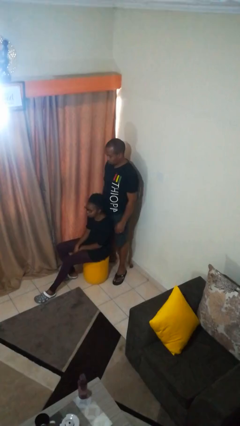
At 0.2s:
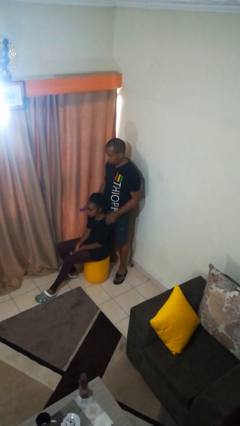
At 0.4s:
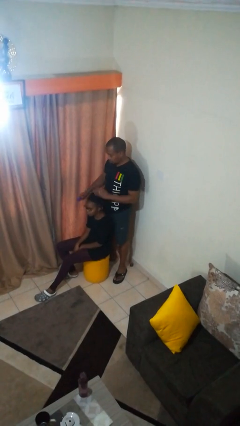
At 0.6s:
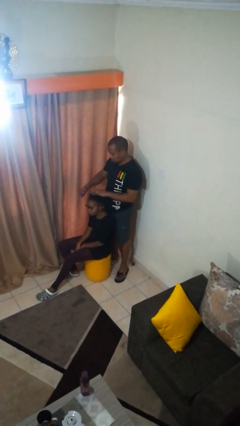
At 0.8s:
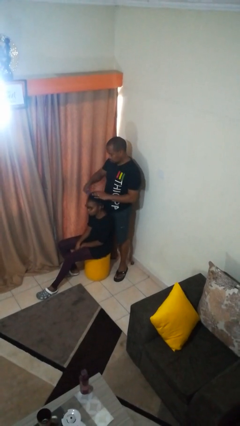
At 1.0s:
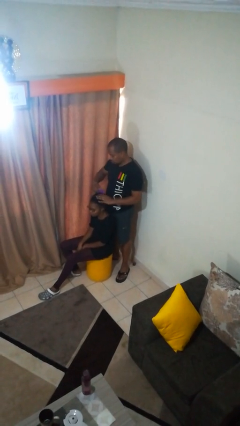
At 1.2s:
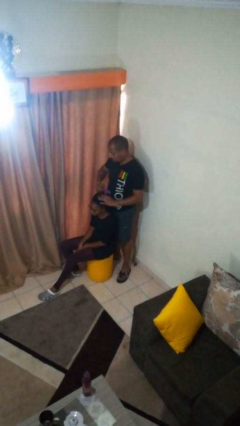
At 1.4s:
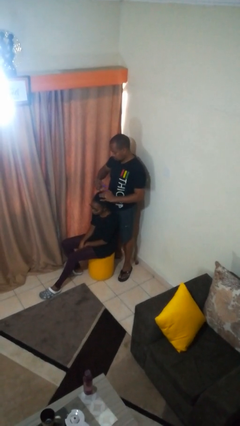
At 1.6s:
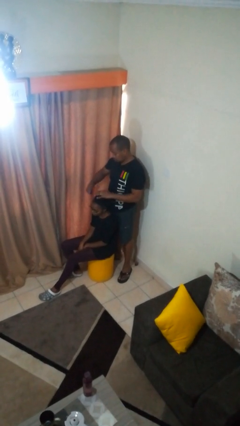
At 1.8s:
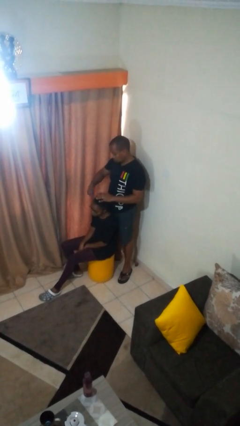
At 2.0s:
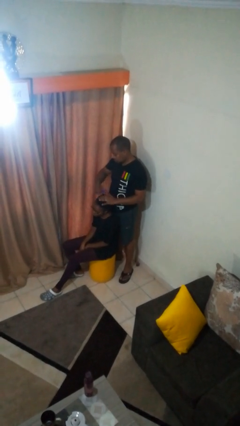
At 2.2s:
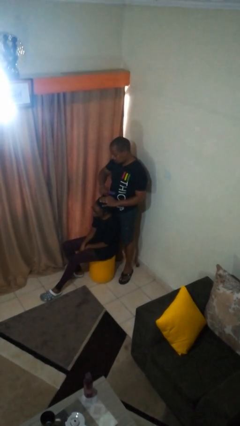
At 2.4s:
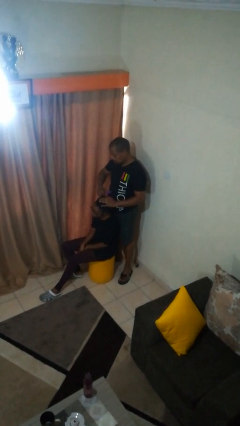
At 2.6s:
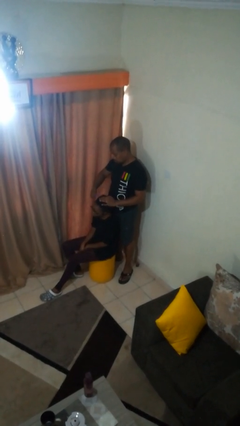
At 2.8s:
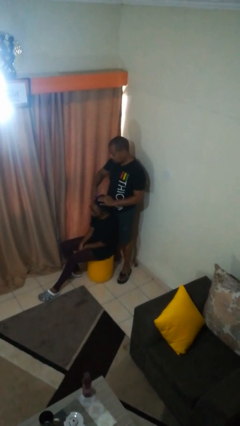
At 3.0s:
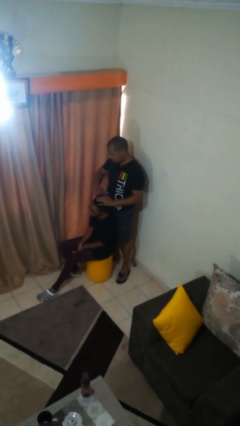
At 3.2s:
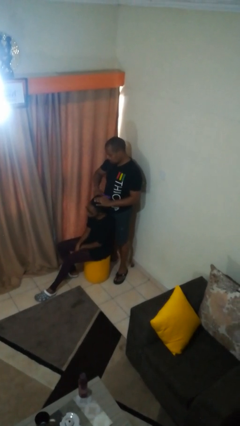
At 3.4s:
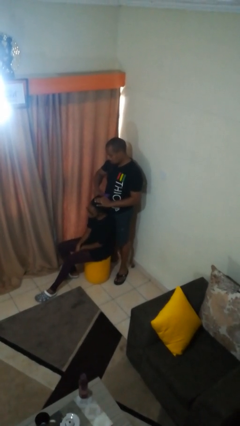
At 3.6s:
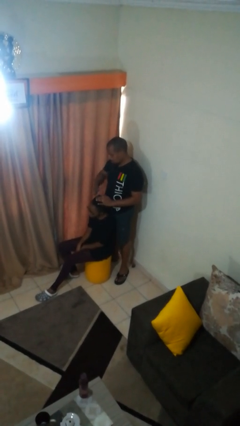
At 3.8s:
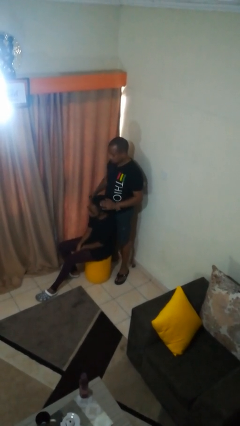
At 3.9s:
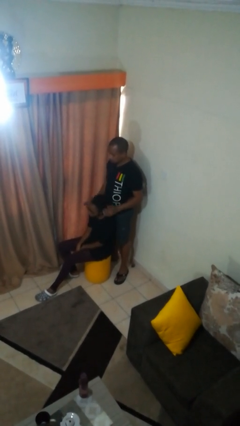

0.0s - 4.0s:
person brushes hair of person

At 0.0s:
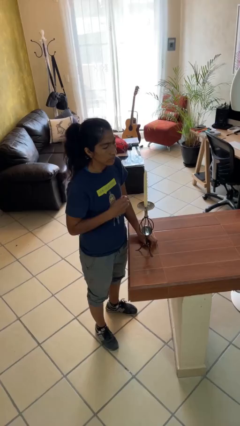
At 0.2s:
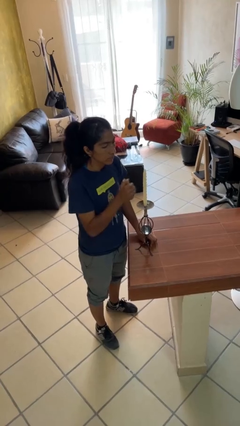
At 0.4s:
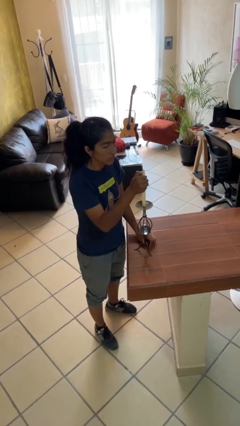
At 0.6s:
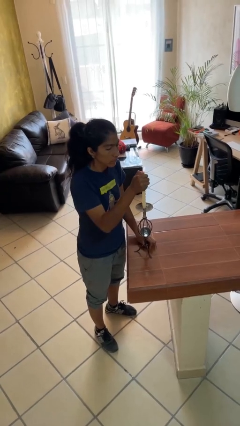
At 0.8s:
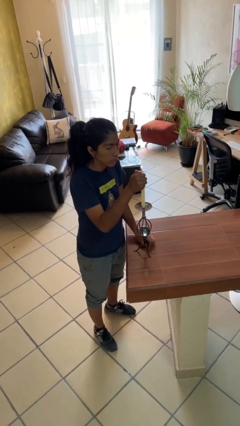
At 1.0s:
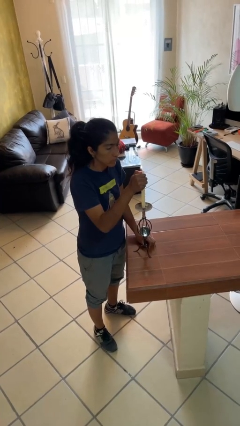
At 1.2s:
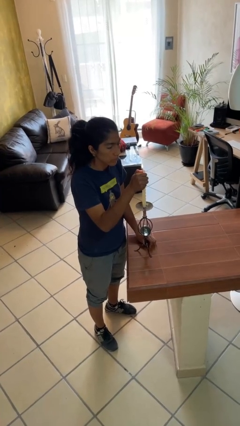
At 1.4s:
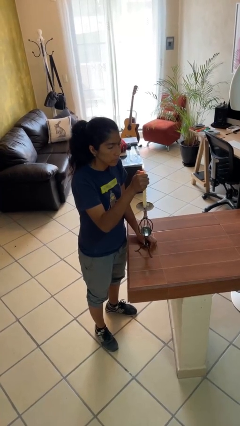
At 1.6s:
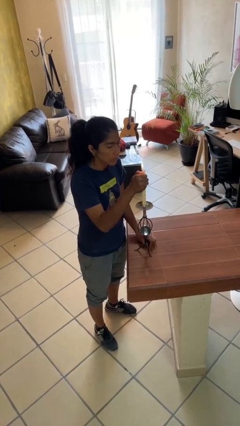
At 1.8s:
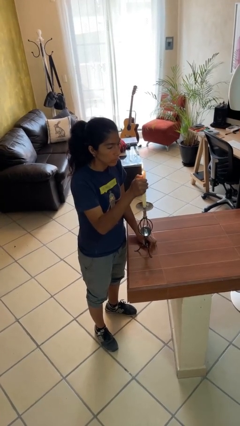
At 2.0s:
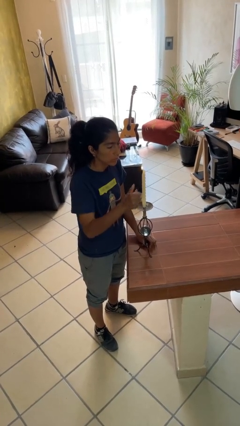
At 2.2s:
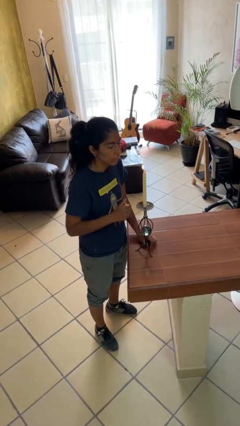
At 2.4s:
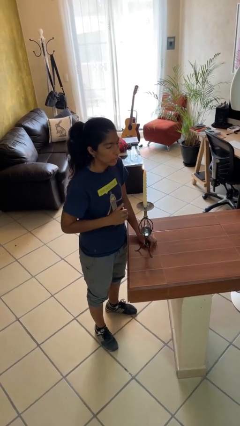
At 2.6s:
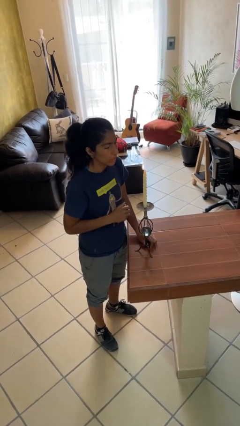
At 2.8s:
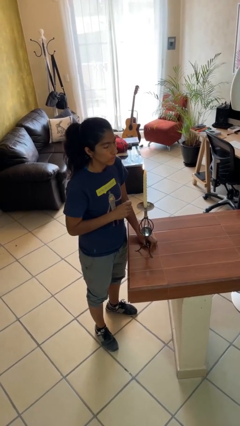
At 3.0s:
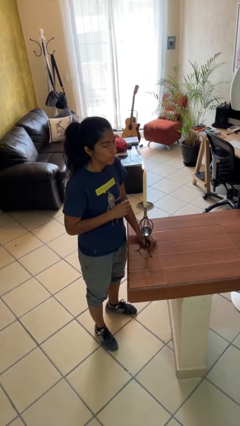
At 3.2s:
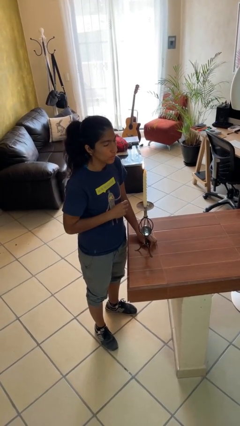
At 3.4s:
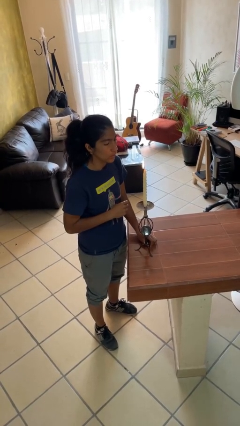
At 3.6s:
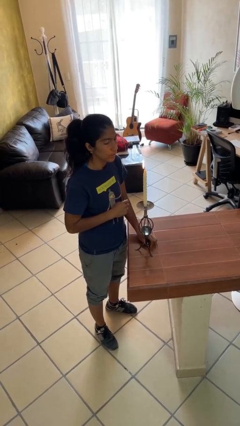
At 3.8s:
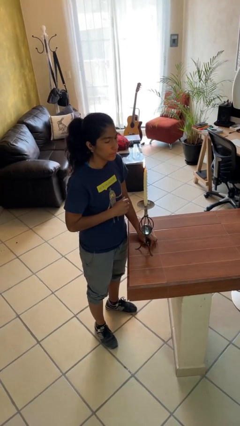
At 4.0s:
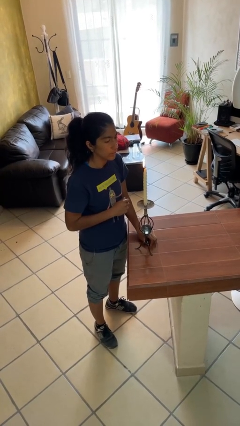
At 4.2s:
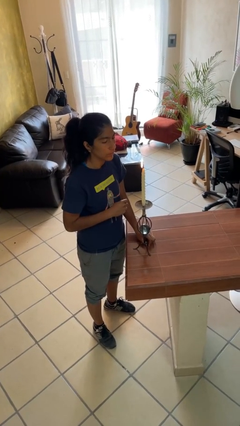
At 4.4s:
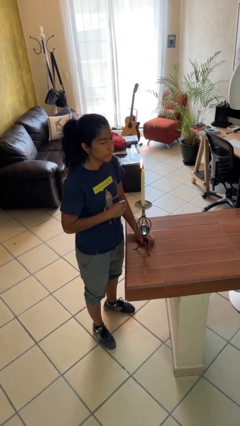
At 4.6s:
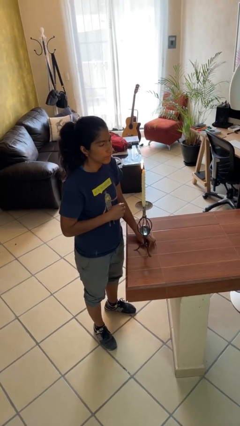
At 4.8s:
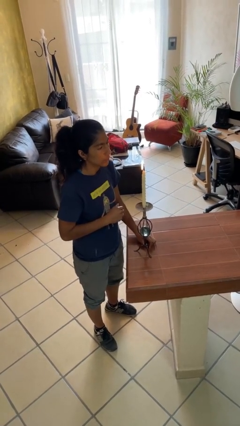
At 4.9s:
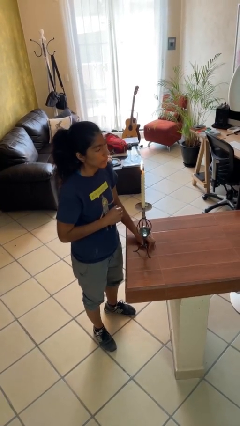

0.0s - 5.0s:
person lights candle

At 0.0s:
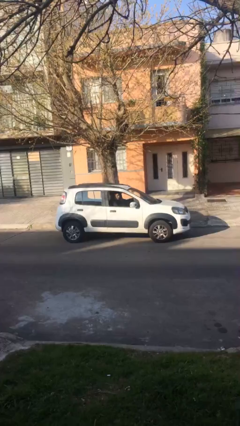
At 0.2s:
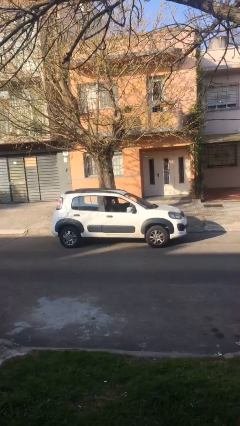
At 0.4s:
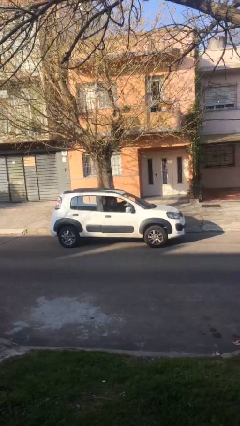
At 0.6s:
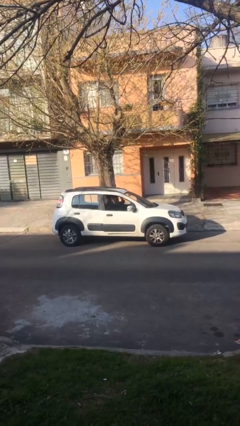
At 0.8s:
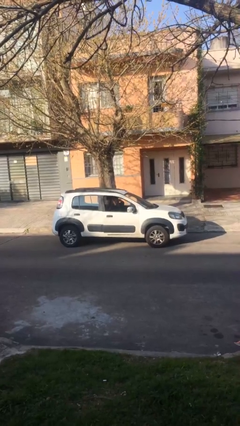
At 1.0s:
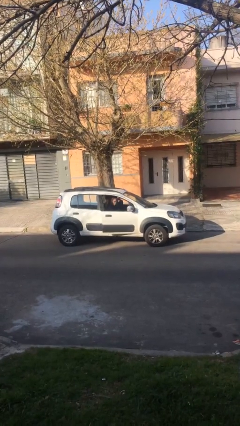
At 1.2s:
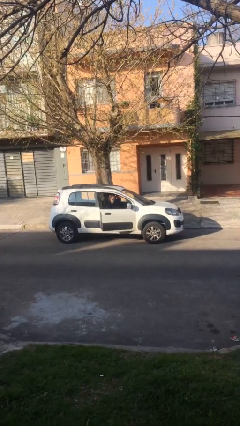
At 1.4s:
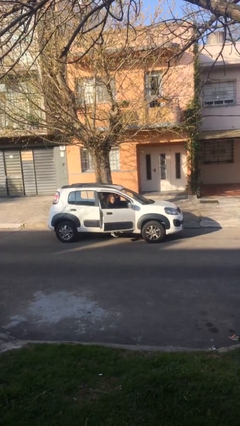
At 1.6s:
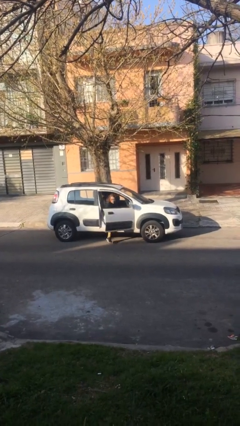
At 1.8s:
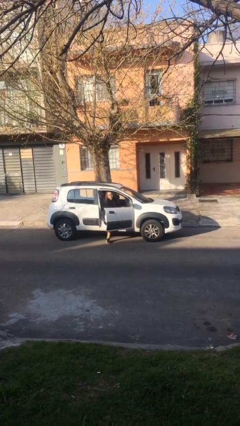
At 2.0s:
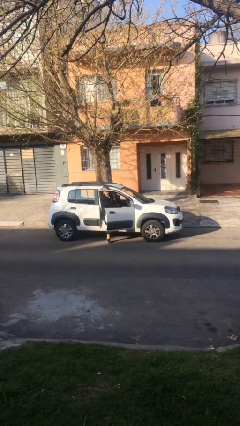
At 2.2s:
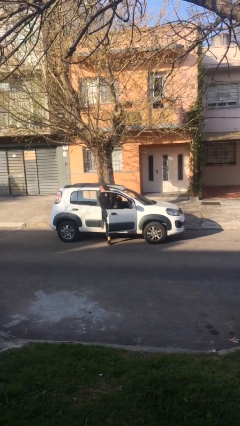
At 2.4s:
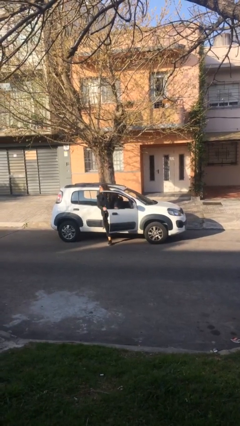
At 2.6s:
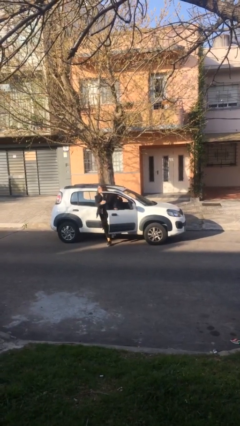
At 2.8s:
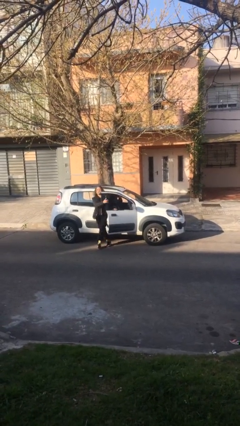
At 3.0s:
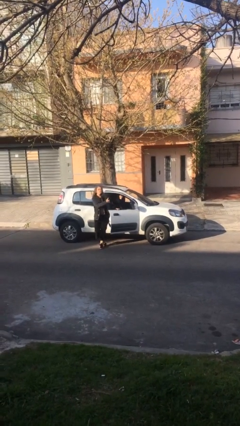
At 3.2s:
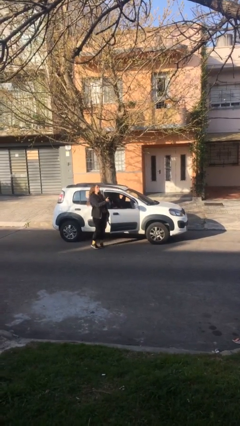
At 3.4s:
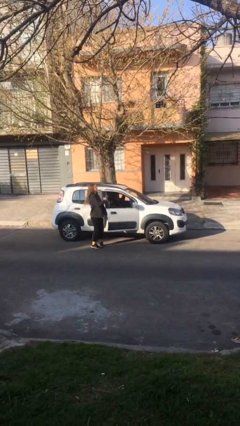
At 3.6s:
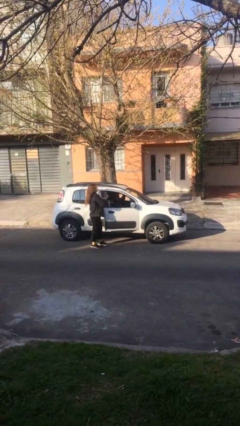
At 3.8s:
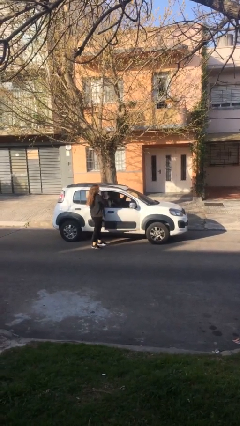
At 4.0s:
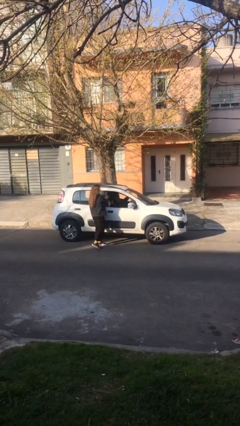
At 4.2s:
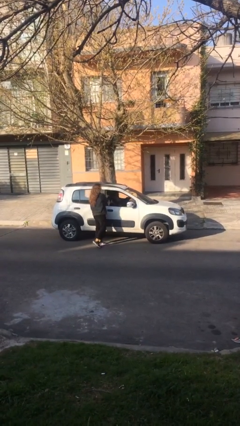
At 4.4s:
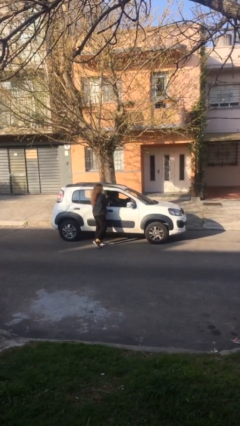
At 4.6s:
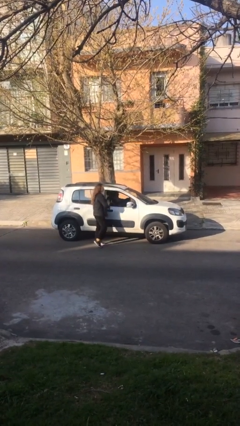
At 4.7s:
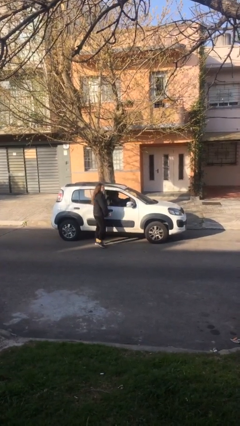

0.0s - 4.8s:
car drops off person

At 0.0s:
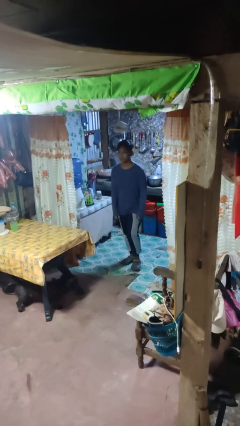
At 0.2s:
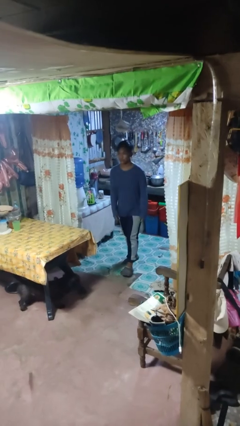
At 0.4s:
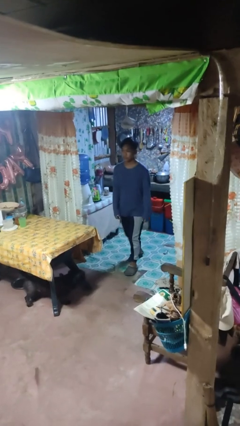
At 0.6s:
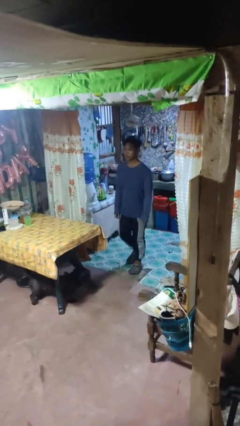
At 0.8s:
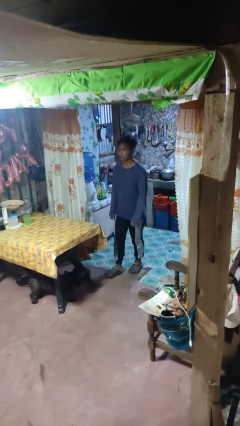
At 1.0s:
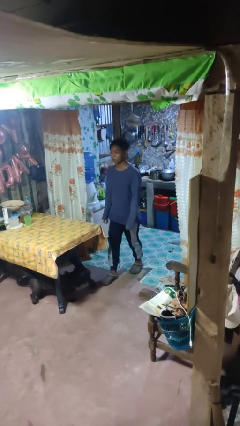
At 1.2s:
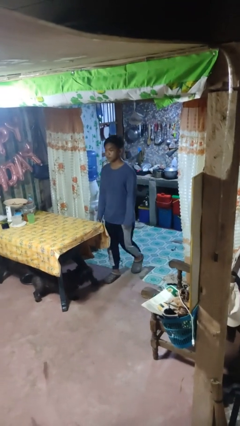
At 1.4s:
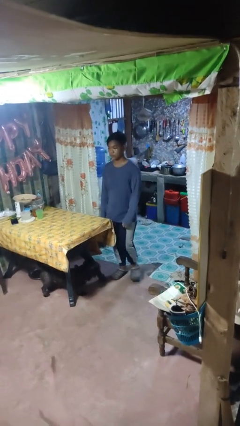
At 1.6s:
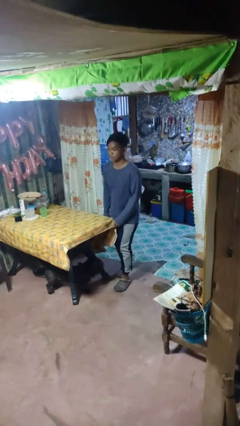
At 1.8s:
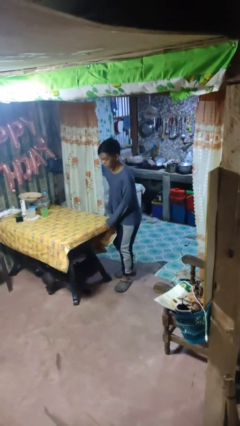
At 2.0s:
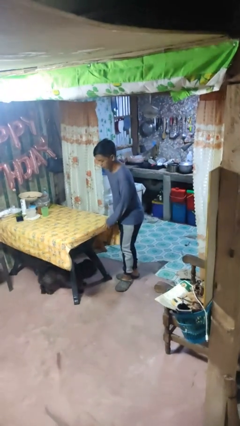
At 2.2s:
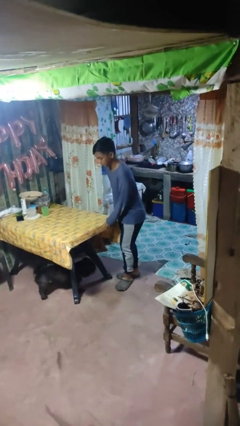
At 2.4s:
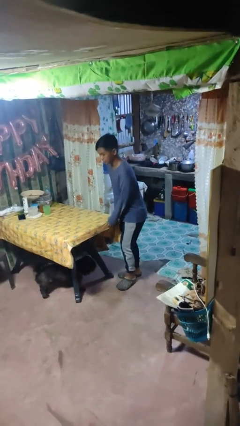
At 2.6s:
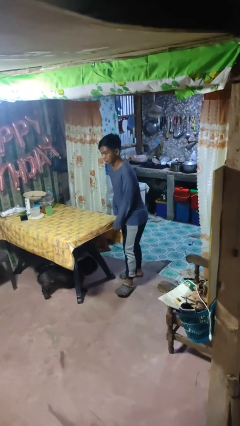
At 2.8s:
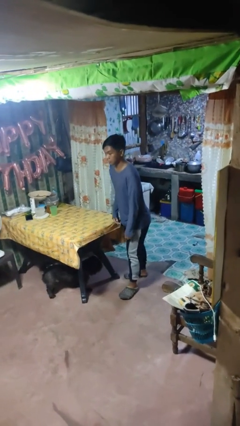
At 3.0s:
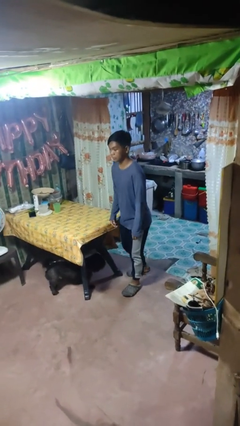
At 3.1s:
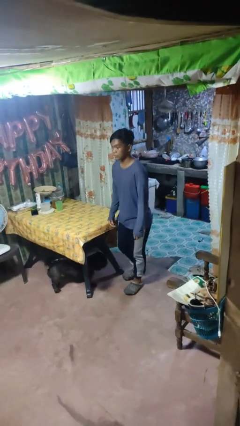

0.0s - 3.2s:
person bumps into table

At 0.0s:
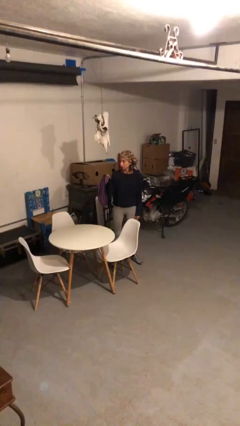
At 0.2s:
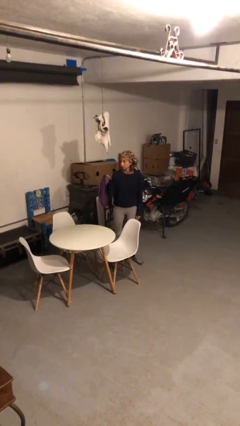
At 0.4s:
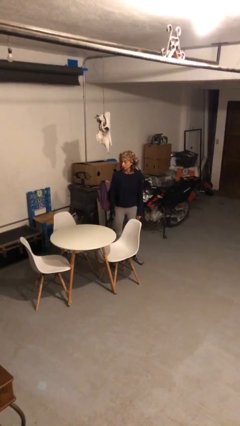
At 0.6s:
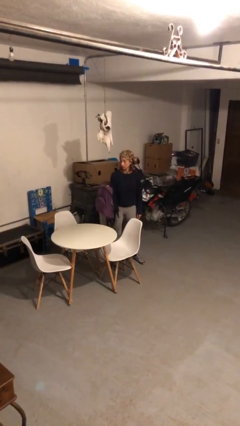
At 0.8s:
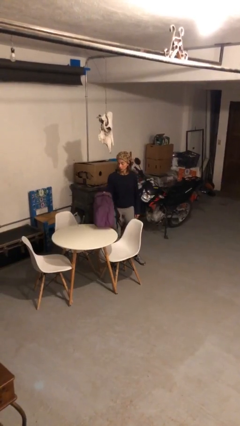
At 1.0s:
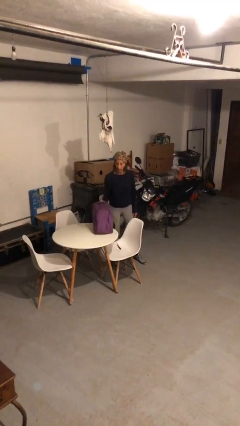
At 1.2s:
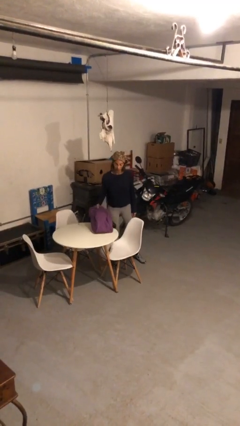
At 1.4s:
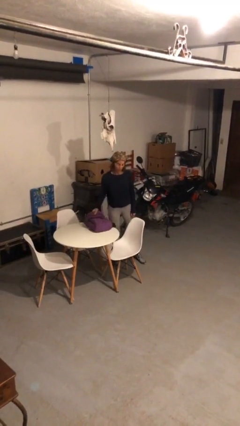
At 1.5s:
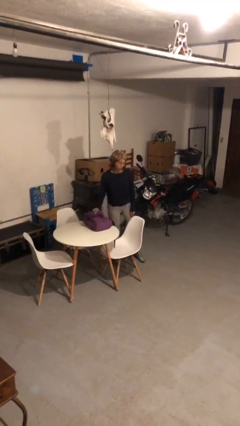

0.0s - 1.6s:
person puts down object on table
